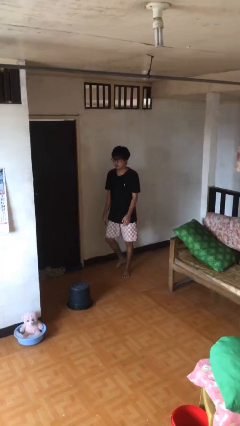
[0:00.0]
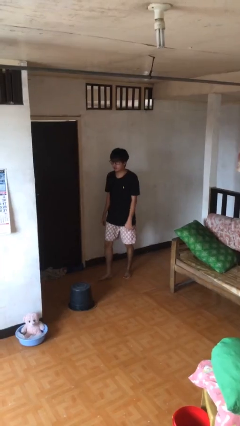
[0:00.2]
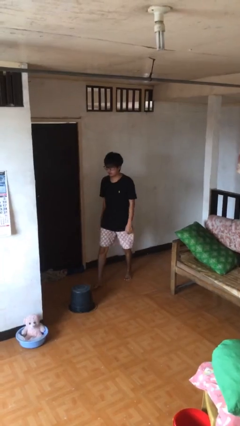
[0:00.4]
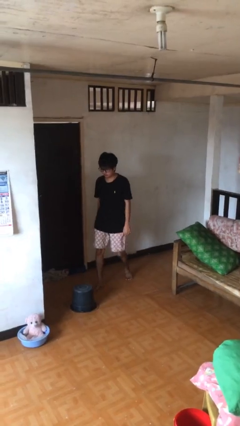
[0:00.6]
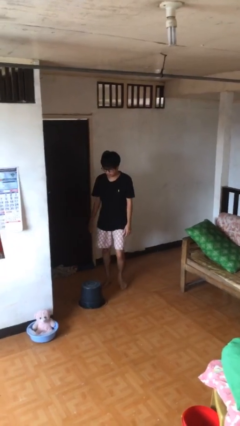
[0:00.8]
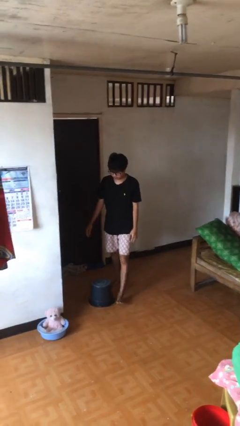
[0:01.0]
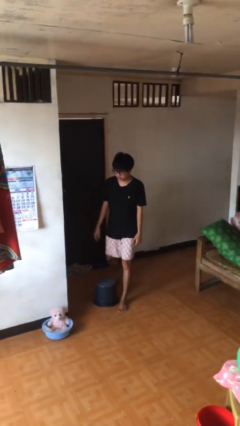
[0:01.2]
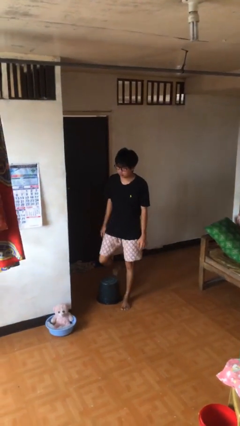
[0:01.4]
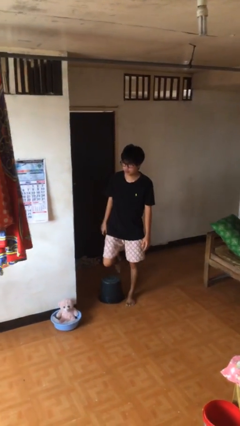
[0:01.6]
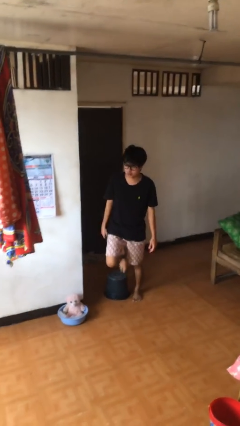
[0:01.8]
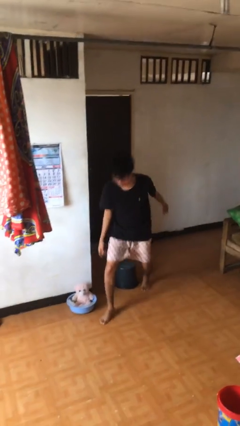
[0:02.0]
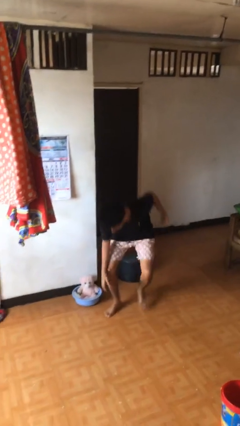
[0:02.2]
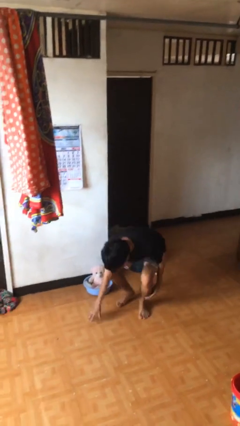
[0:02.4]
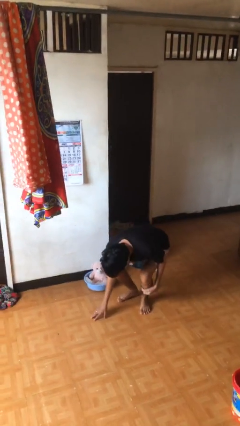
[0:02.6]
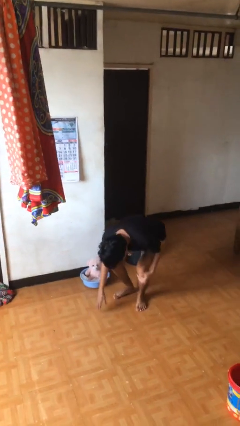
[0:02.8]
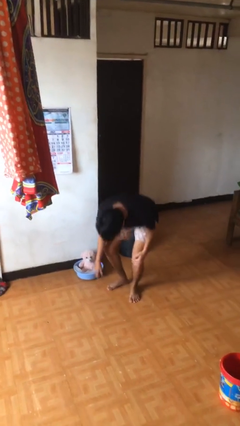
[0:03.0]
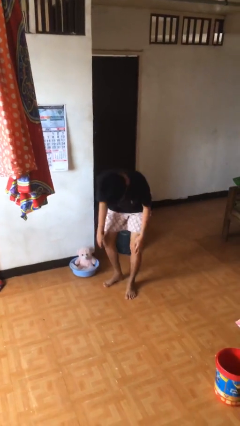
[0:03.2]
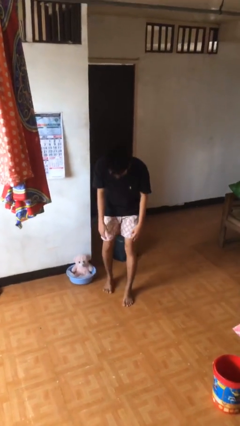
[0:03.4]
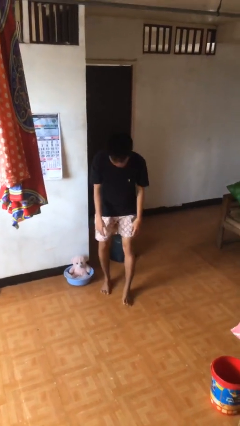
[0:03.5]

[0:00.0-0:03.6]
person trips on object on floor

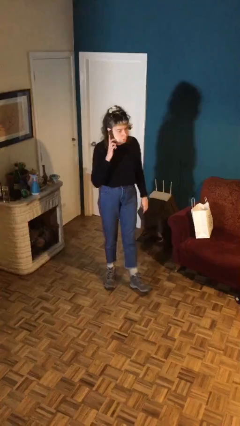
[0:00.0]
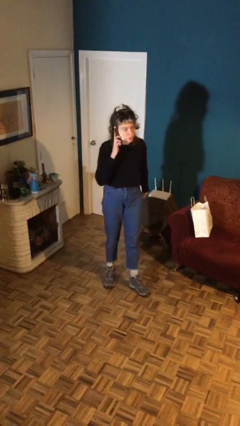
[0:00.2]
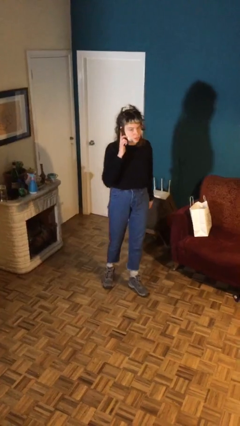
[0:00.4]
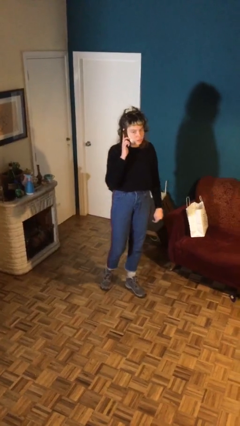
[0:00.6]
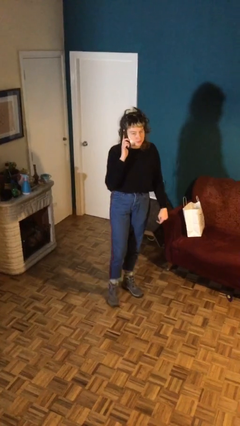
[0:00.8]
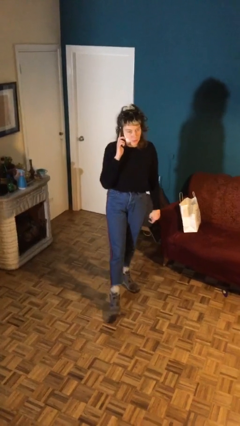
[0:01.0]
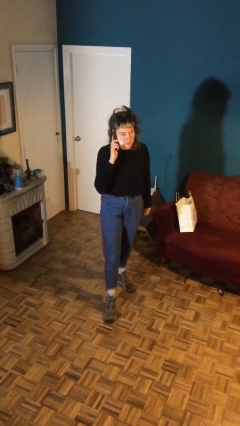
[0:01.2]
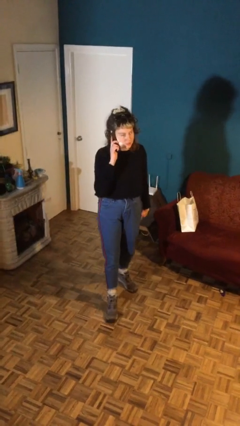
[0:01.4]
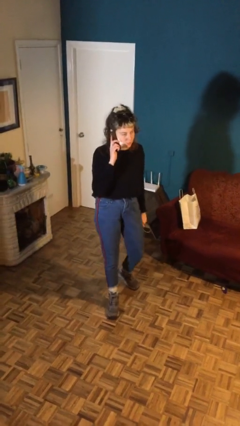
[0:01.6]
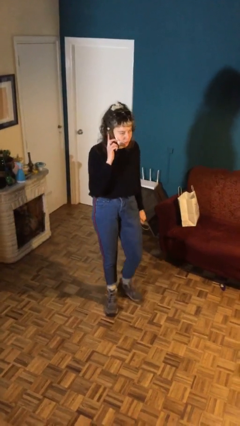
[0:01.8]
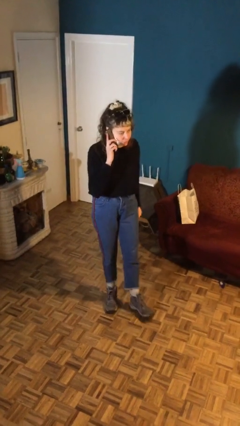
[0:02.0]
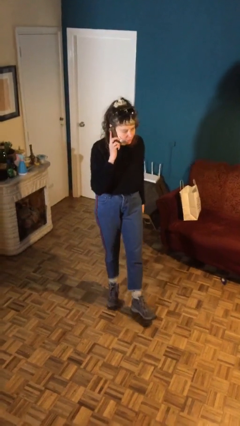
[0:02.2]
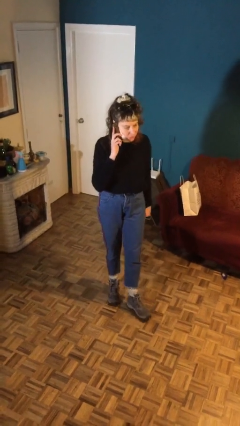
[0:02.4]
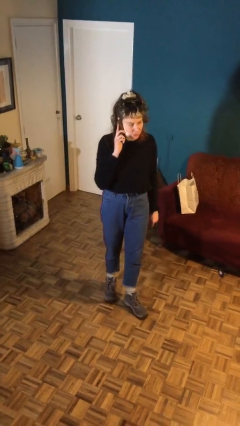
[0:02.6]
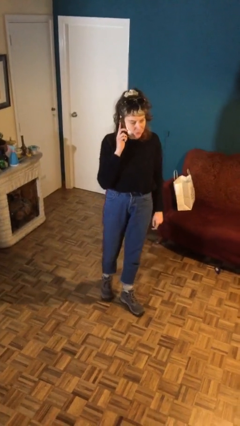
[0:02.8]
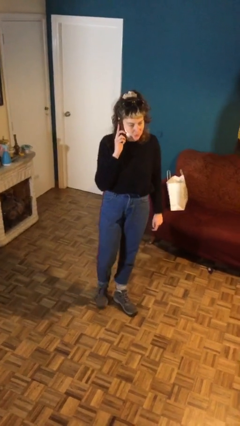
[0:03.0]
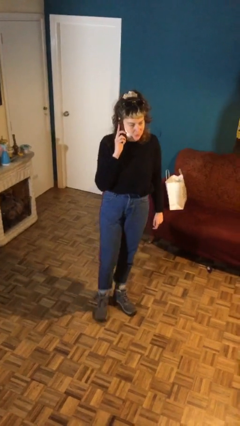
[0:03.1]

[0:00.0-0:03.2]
person talks on phone

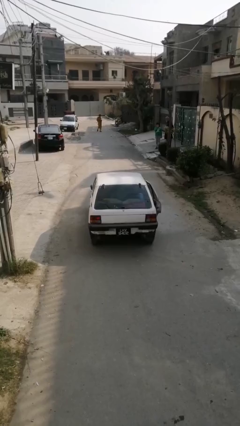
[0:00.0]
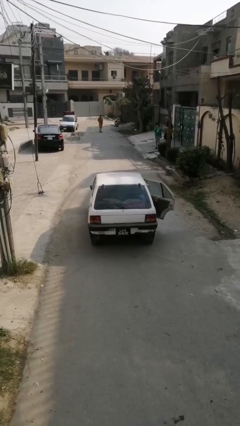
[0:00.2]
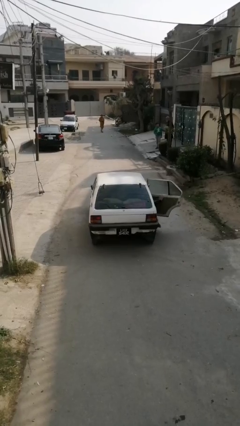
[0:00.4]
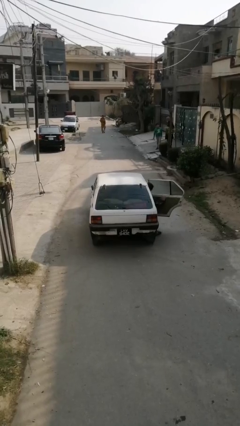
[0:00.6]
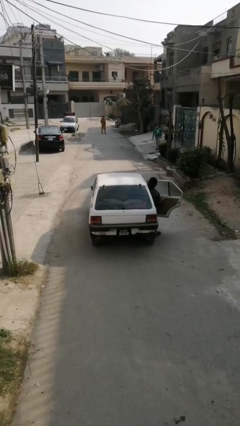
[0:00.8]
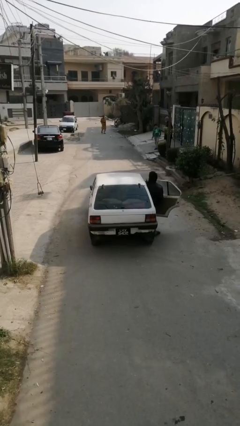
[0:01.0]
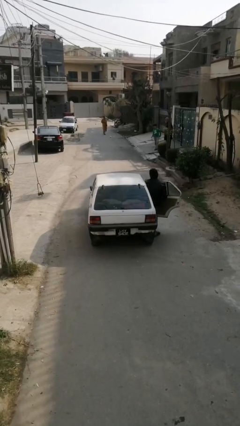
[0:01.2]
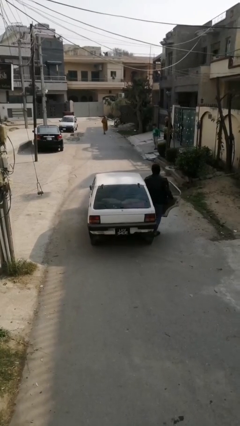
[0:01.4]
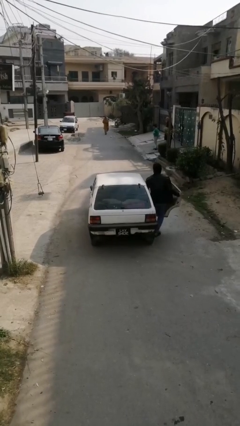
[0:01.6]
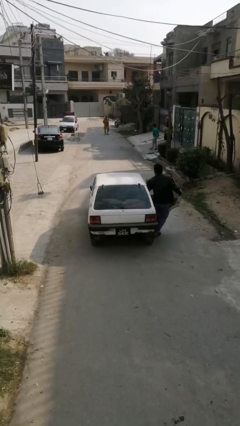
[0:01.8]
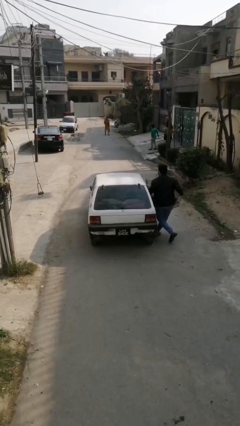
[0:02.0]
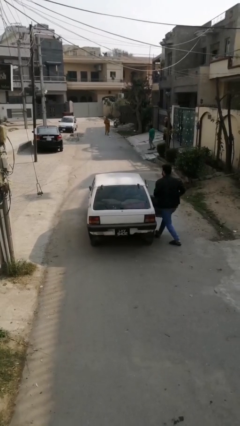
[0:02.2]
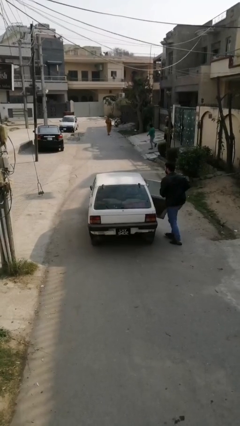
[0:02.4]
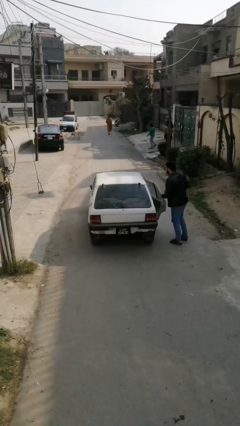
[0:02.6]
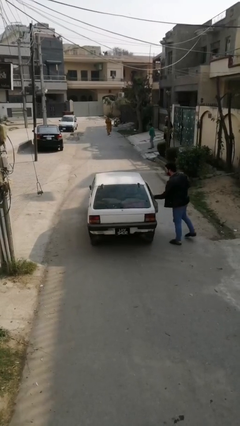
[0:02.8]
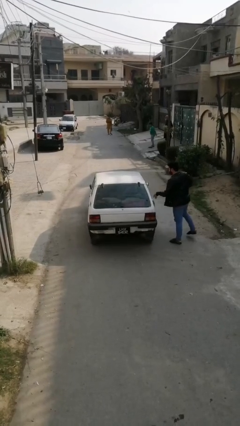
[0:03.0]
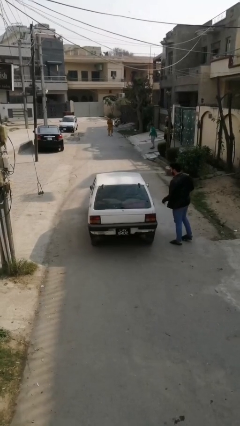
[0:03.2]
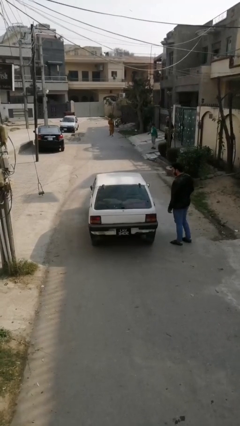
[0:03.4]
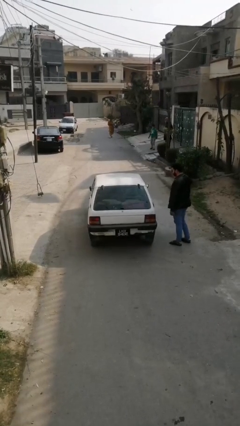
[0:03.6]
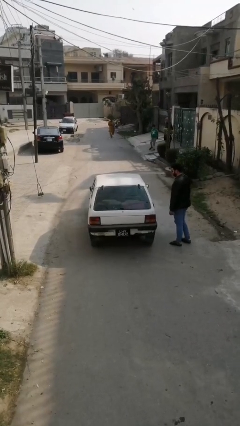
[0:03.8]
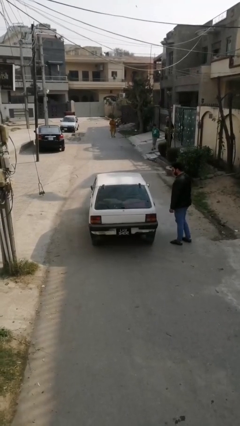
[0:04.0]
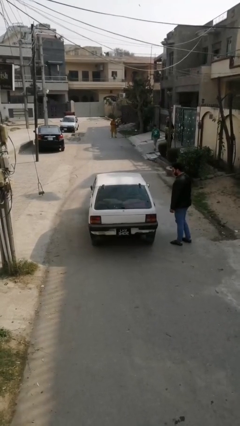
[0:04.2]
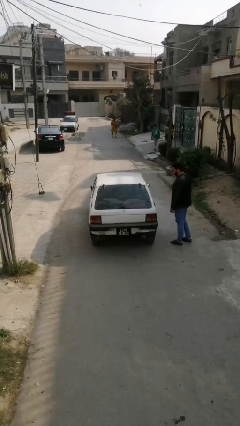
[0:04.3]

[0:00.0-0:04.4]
car drops off person

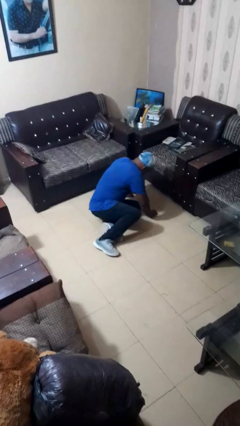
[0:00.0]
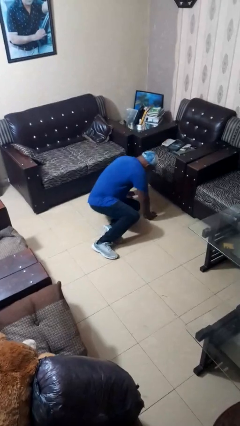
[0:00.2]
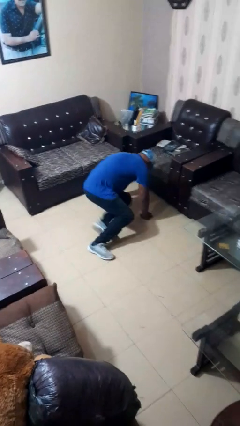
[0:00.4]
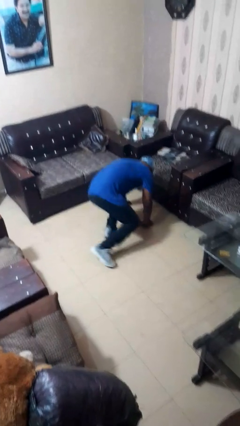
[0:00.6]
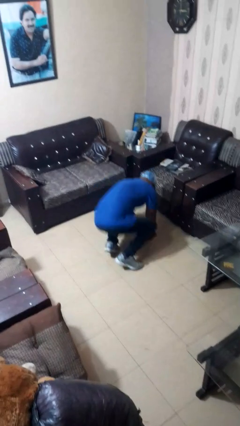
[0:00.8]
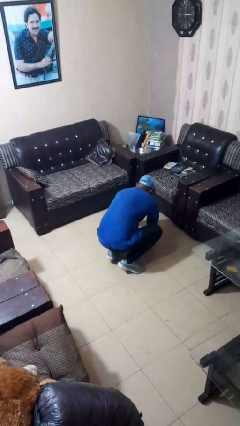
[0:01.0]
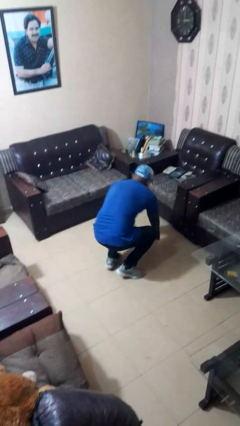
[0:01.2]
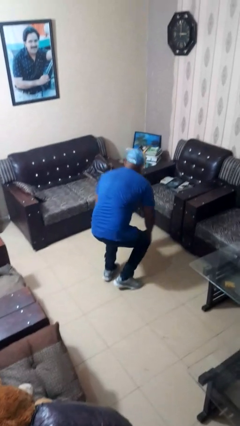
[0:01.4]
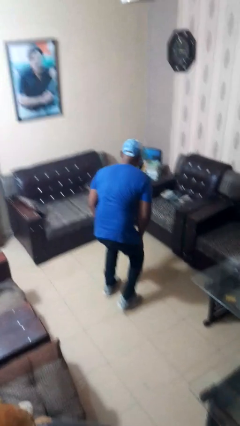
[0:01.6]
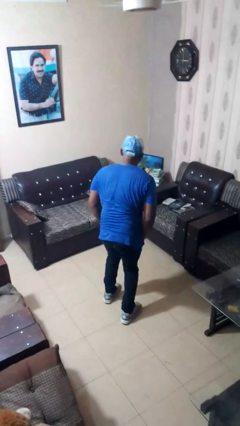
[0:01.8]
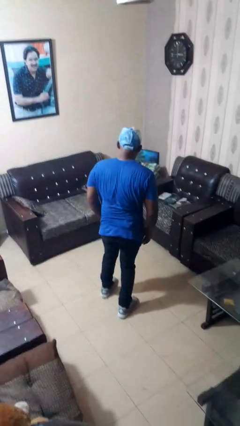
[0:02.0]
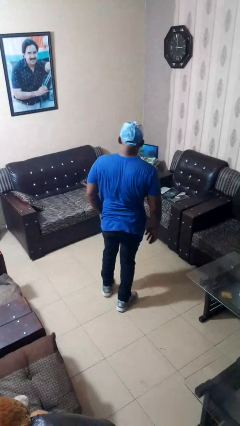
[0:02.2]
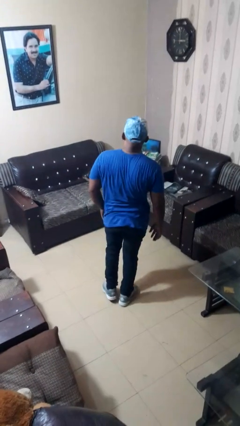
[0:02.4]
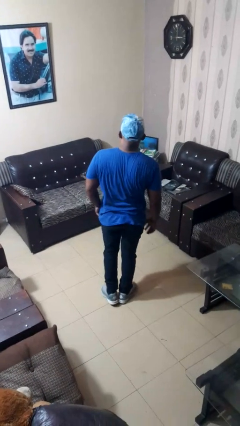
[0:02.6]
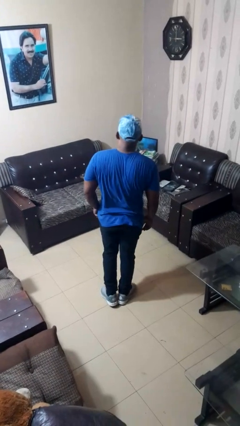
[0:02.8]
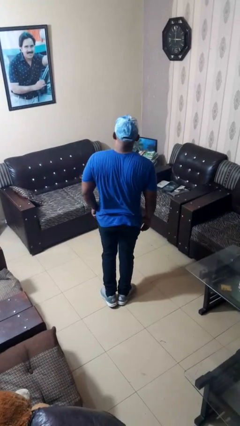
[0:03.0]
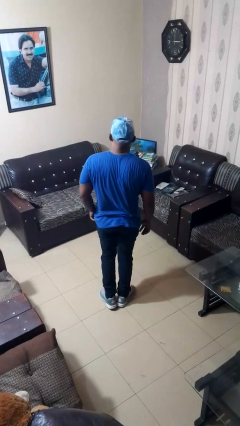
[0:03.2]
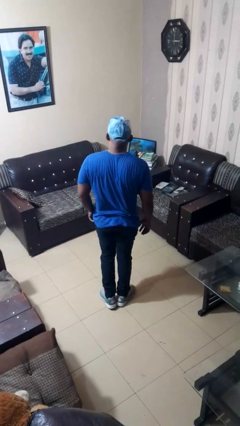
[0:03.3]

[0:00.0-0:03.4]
person stands up from floor

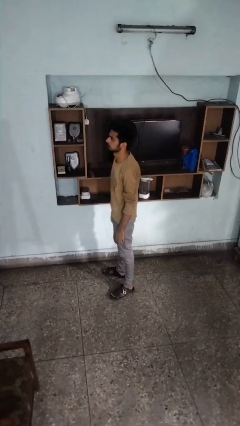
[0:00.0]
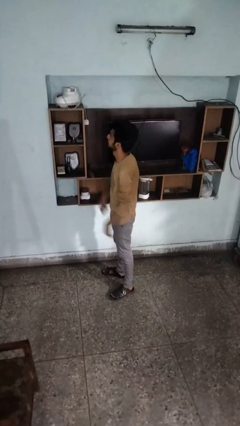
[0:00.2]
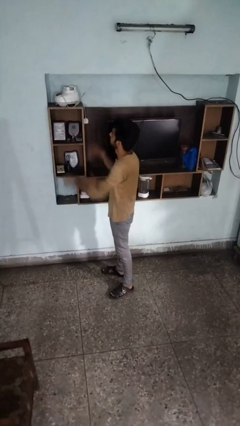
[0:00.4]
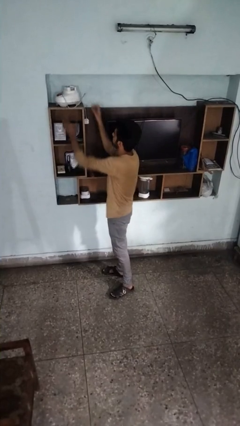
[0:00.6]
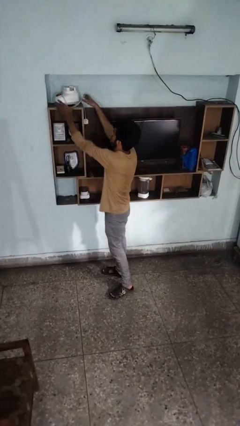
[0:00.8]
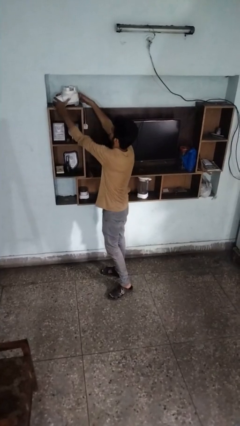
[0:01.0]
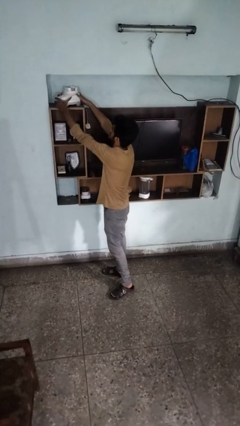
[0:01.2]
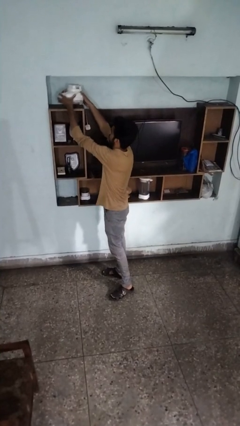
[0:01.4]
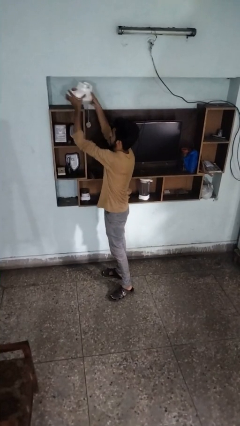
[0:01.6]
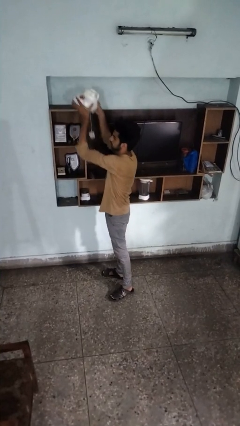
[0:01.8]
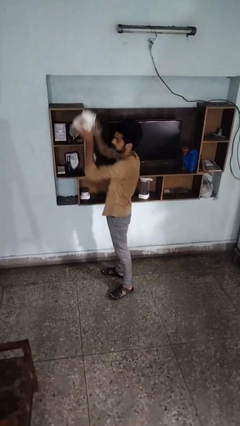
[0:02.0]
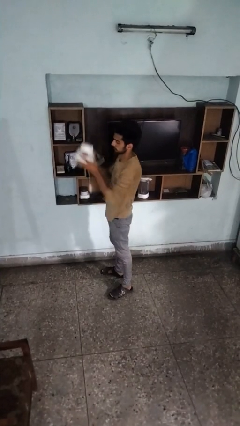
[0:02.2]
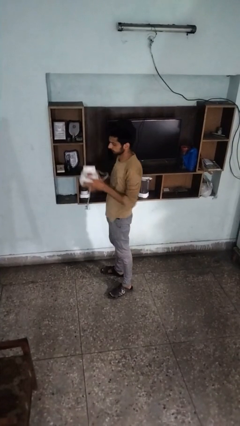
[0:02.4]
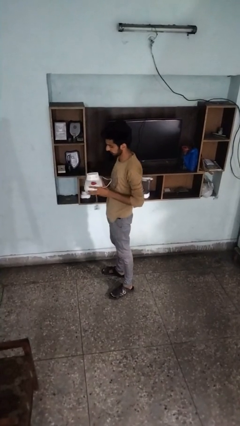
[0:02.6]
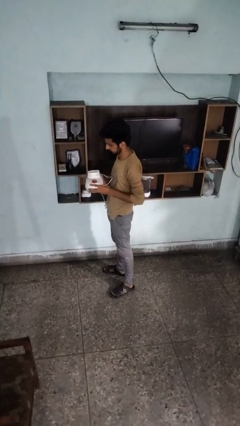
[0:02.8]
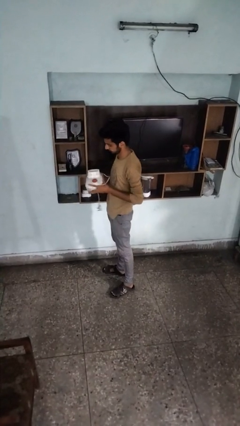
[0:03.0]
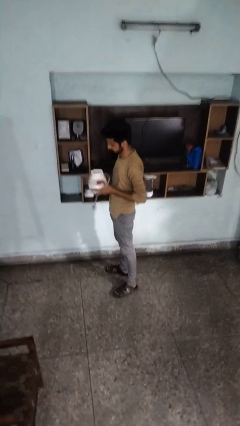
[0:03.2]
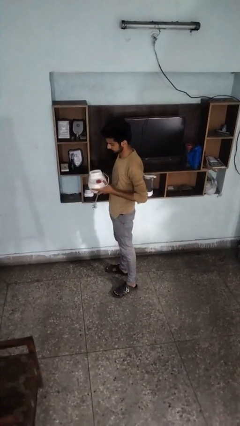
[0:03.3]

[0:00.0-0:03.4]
person picks up object from shelf
